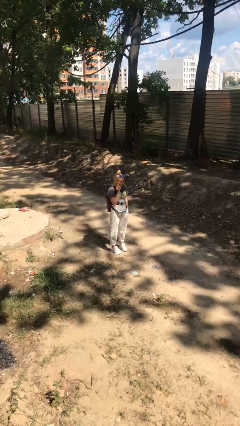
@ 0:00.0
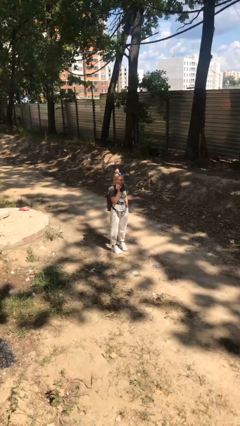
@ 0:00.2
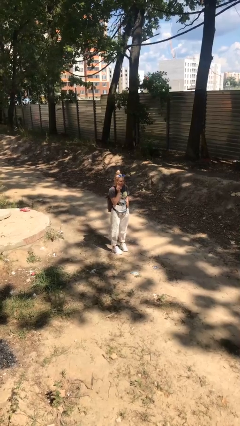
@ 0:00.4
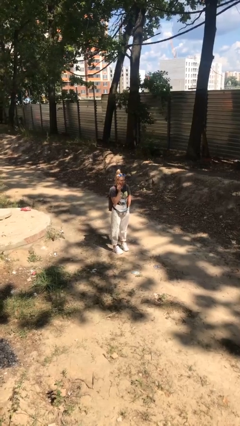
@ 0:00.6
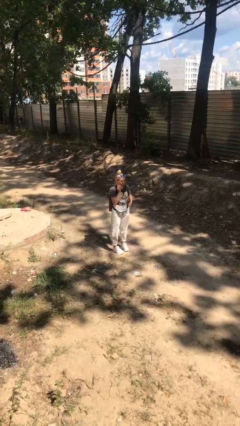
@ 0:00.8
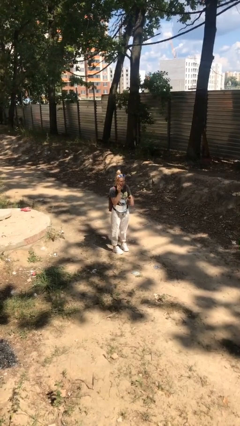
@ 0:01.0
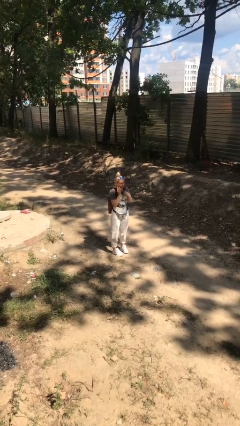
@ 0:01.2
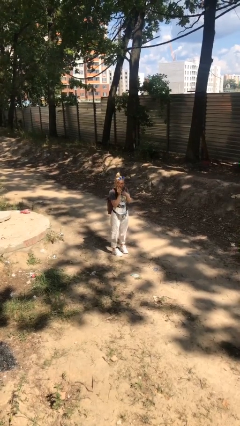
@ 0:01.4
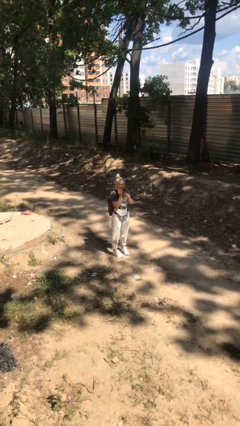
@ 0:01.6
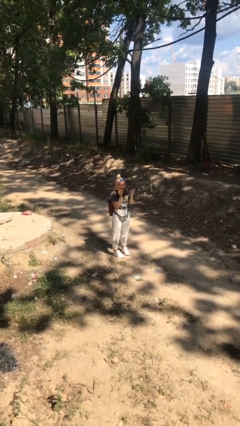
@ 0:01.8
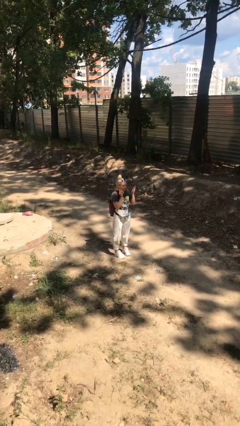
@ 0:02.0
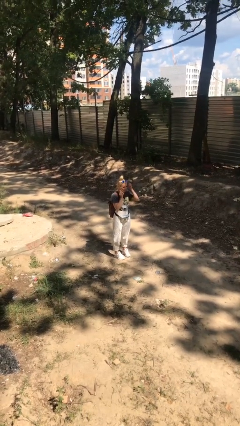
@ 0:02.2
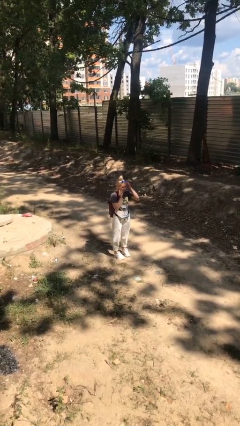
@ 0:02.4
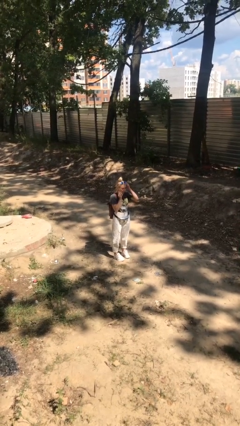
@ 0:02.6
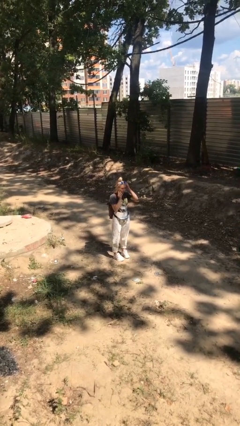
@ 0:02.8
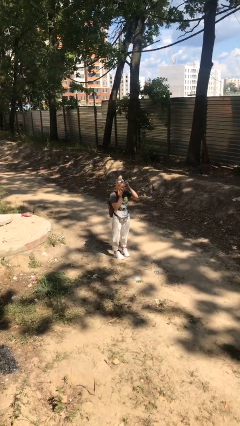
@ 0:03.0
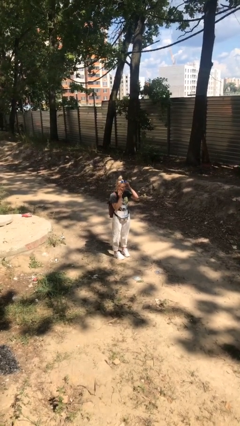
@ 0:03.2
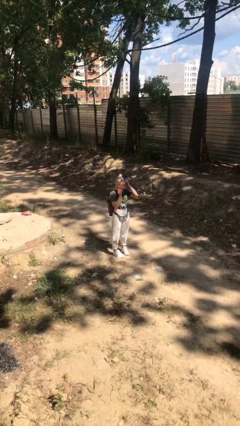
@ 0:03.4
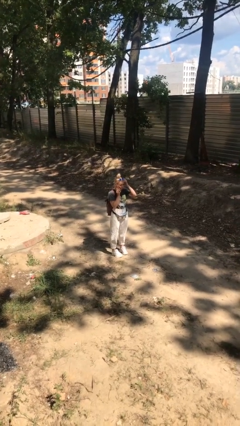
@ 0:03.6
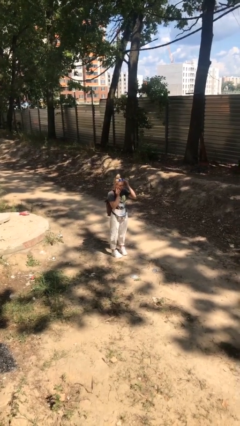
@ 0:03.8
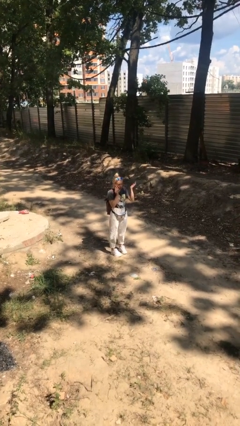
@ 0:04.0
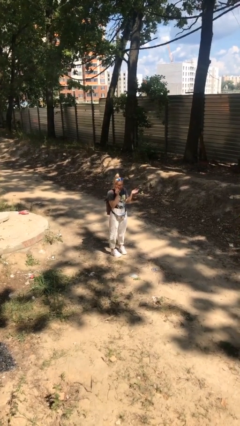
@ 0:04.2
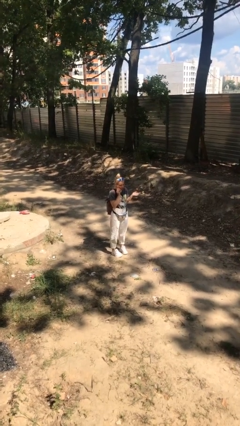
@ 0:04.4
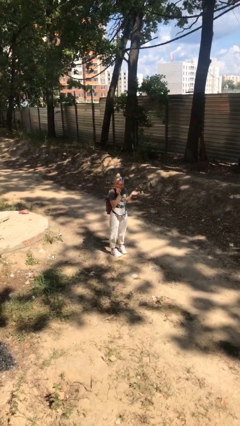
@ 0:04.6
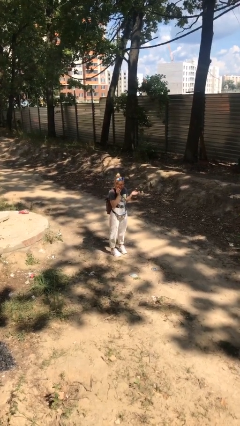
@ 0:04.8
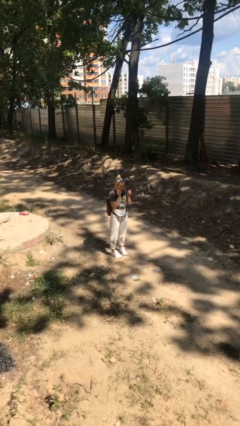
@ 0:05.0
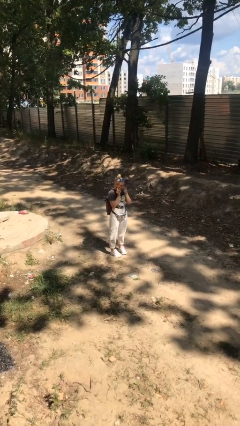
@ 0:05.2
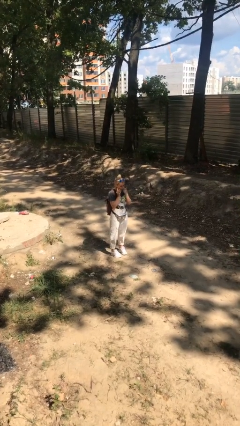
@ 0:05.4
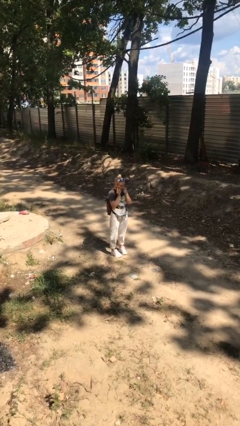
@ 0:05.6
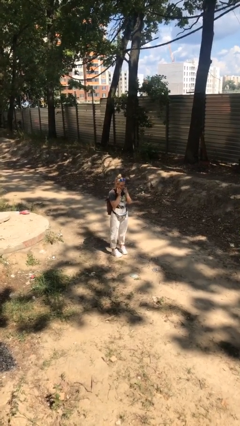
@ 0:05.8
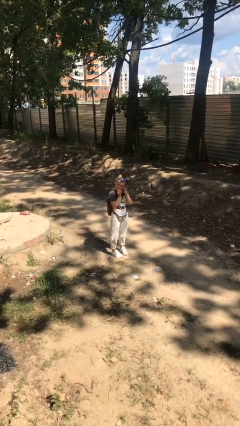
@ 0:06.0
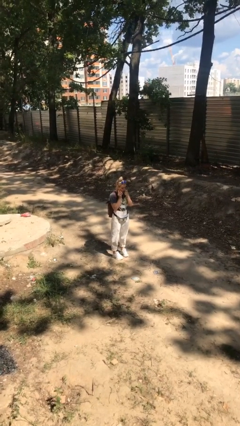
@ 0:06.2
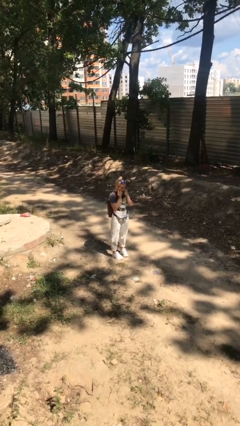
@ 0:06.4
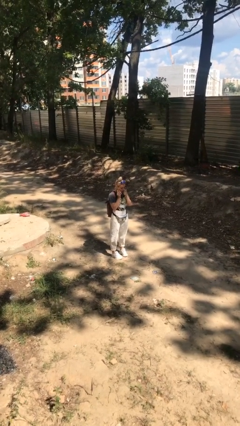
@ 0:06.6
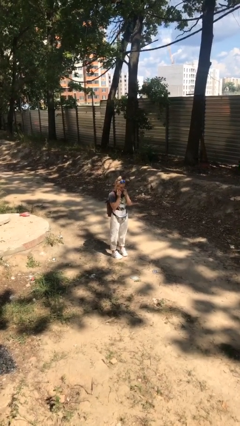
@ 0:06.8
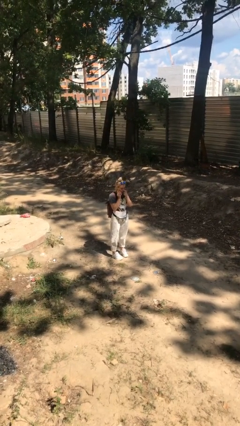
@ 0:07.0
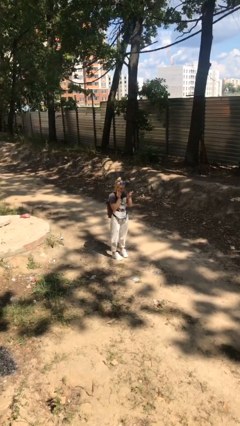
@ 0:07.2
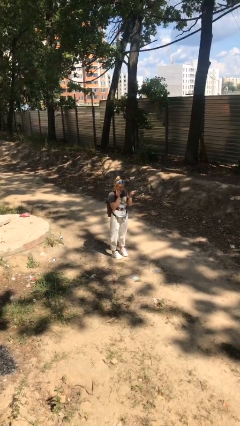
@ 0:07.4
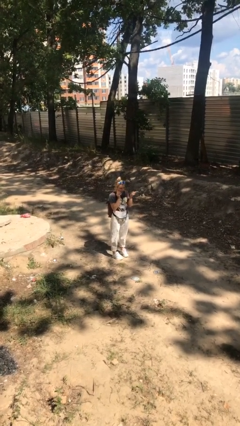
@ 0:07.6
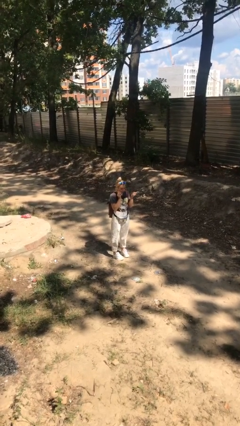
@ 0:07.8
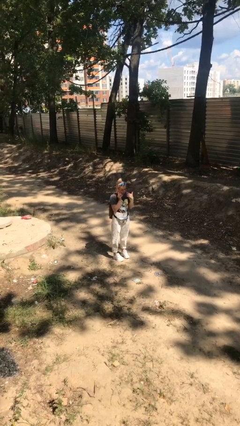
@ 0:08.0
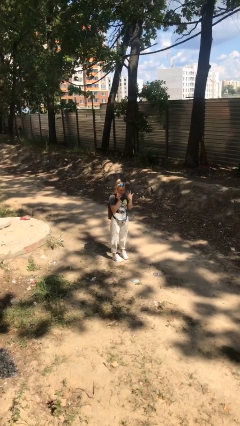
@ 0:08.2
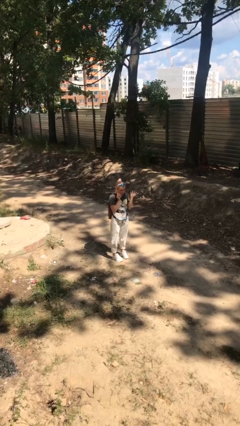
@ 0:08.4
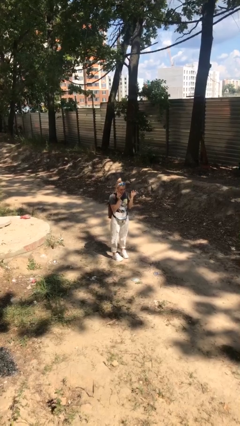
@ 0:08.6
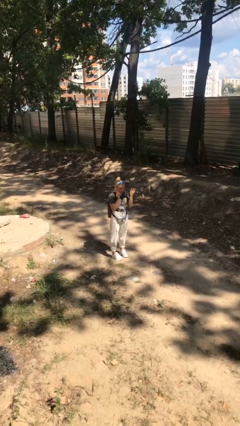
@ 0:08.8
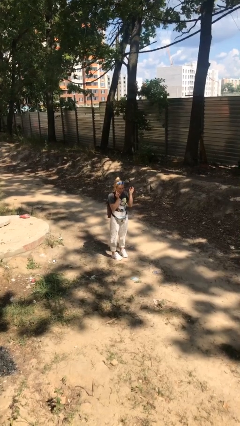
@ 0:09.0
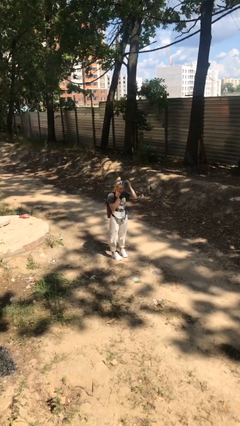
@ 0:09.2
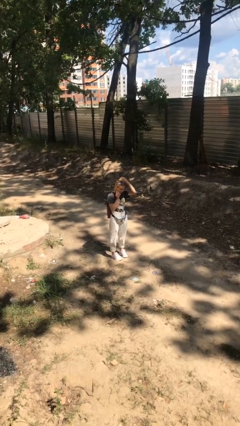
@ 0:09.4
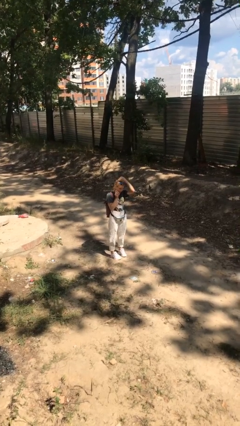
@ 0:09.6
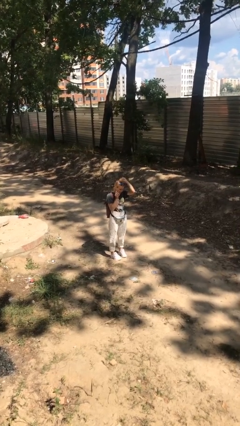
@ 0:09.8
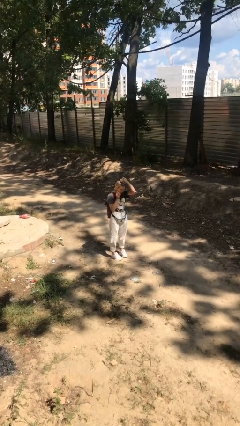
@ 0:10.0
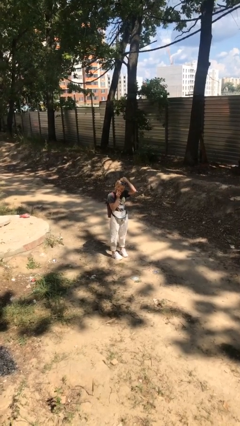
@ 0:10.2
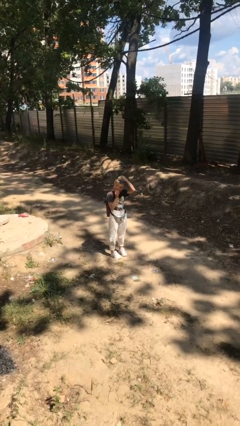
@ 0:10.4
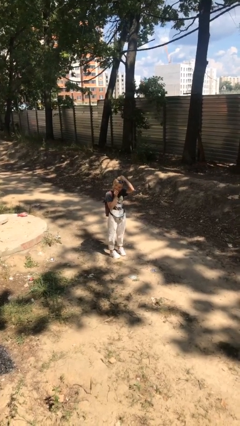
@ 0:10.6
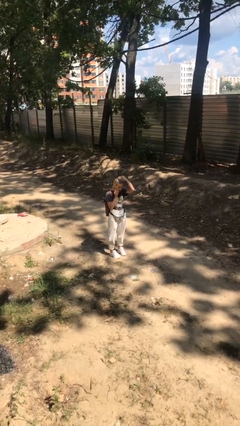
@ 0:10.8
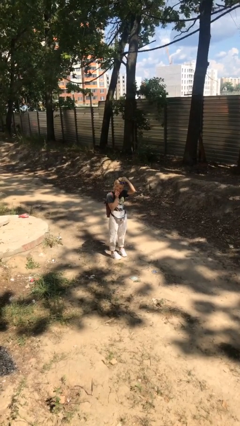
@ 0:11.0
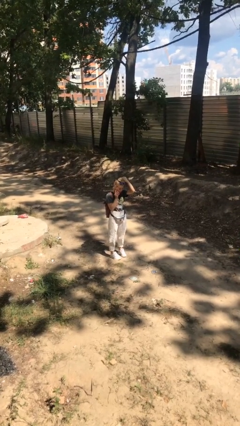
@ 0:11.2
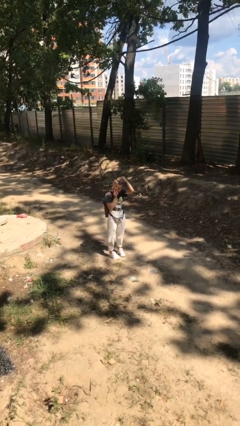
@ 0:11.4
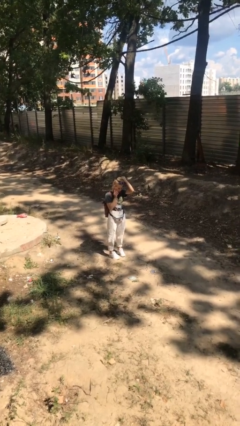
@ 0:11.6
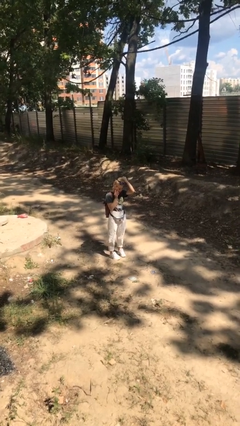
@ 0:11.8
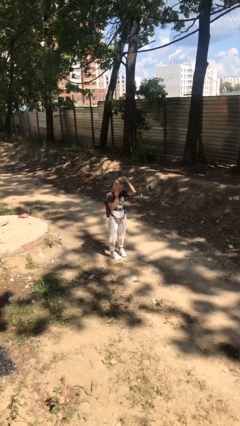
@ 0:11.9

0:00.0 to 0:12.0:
person talks on phone

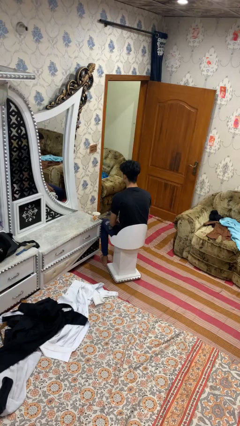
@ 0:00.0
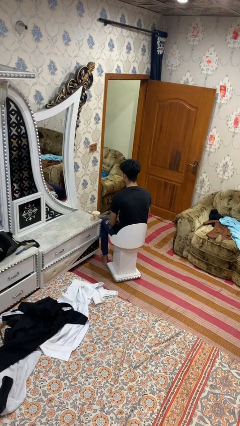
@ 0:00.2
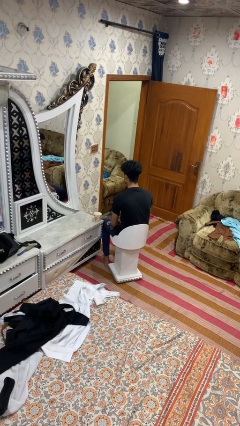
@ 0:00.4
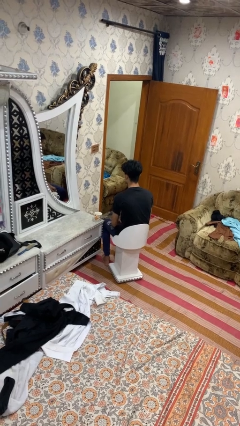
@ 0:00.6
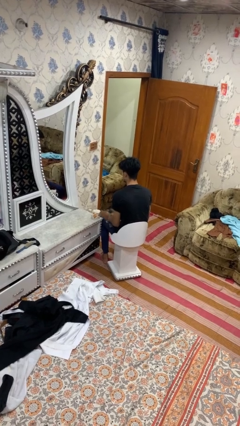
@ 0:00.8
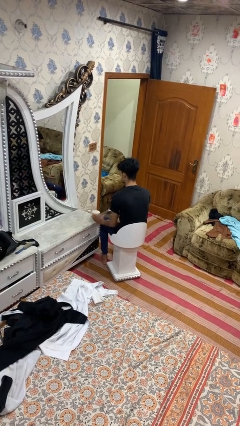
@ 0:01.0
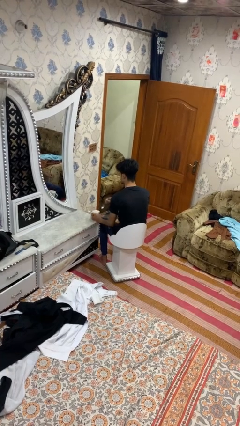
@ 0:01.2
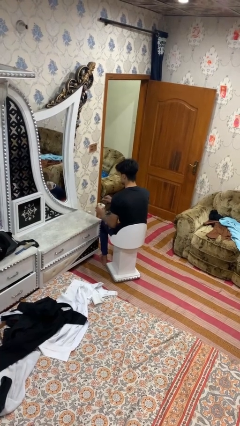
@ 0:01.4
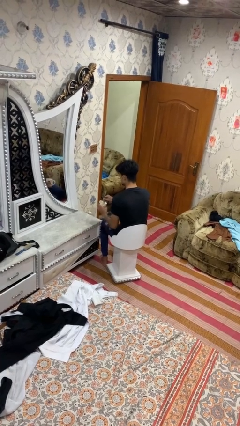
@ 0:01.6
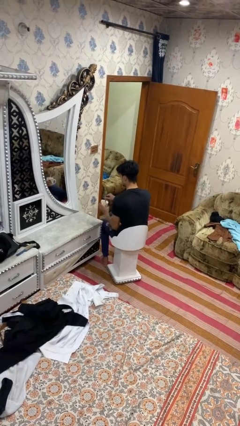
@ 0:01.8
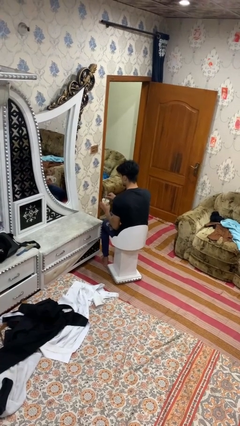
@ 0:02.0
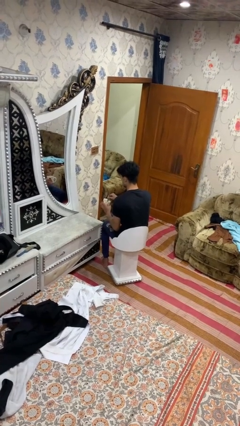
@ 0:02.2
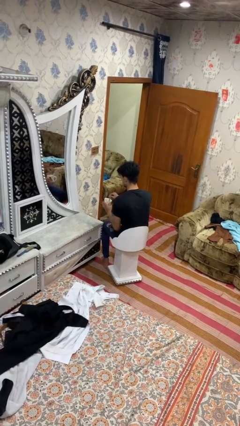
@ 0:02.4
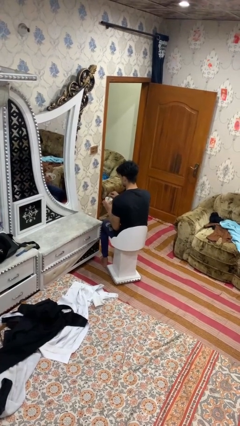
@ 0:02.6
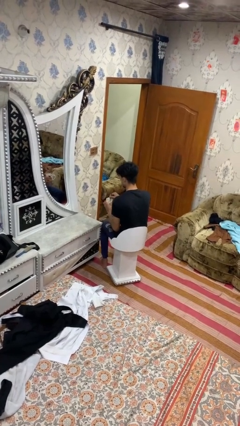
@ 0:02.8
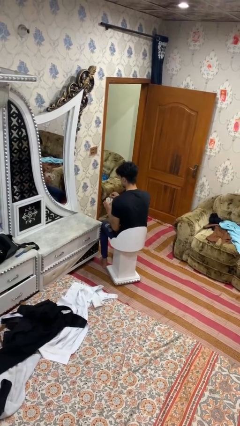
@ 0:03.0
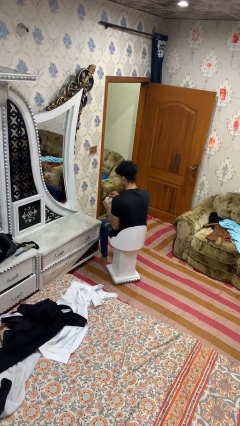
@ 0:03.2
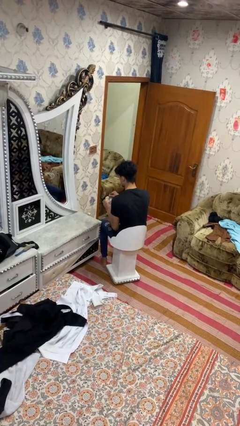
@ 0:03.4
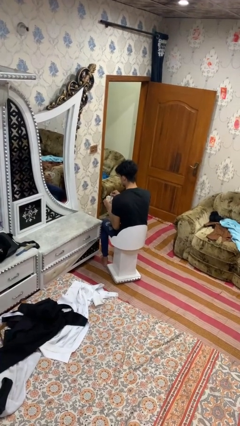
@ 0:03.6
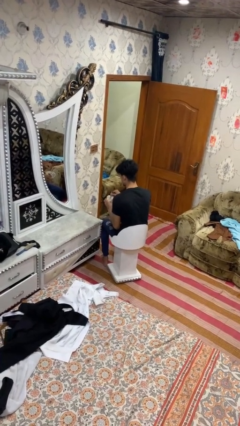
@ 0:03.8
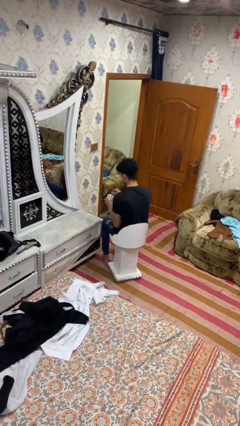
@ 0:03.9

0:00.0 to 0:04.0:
person stirs mug

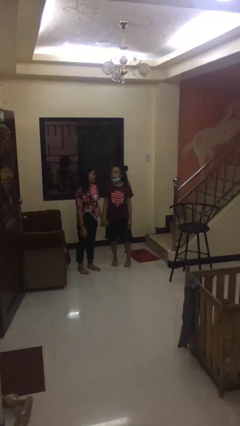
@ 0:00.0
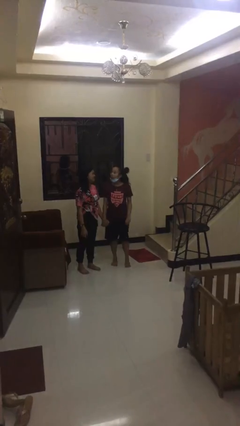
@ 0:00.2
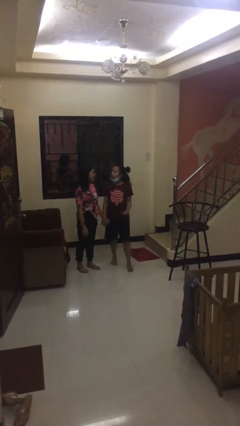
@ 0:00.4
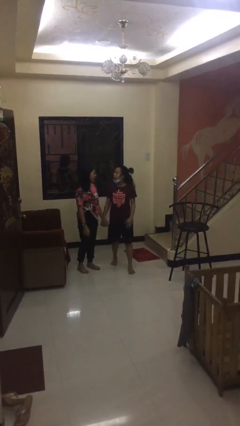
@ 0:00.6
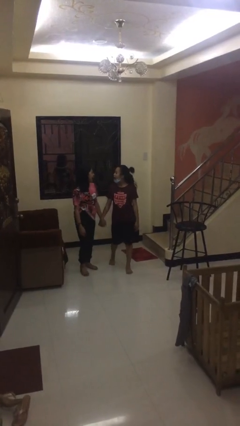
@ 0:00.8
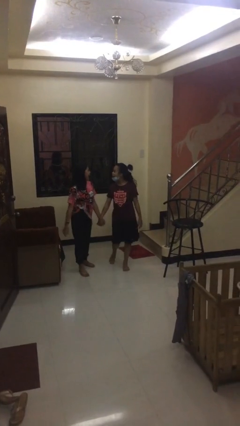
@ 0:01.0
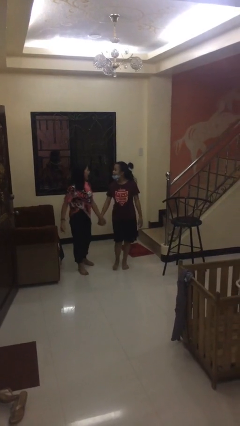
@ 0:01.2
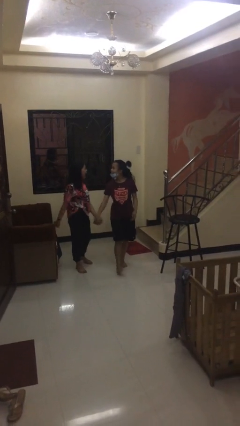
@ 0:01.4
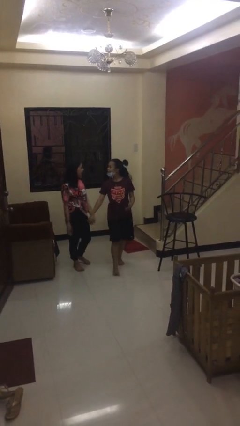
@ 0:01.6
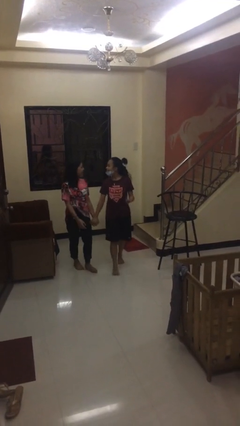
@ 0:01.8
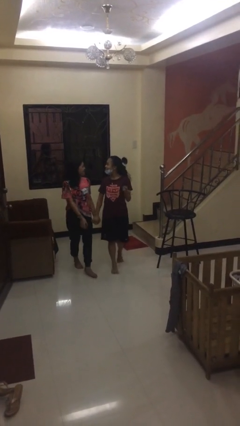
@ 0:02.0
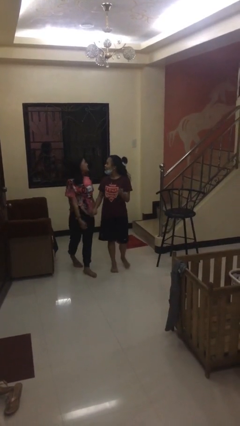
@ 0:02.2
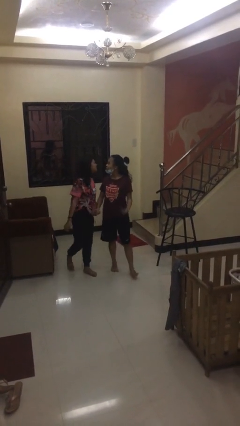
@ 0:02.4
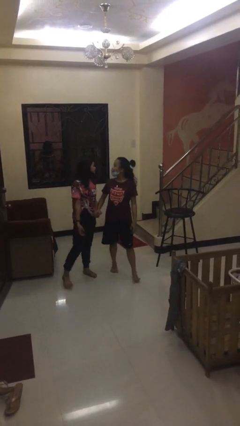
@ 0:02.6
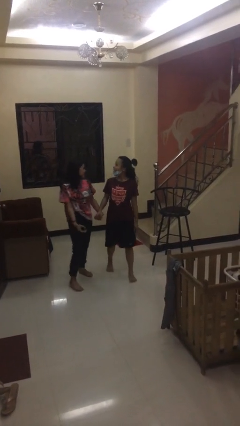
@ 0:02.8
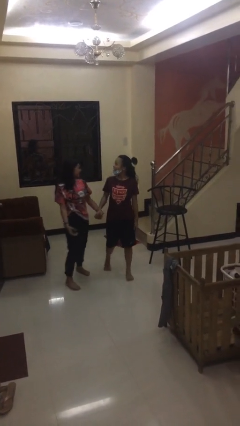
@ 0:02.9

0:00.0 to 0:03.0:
person holds hand
